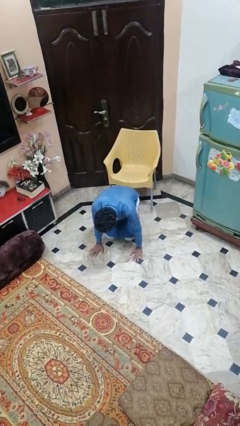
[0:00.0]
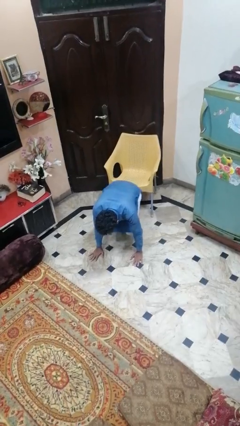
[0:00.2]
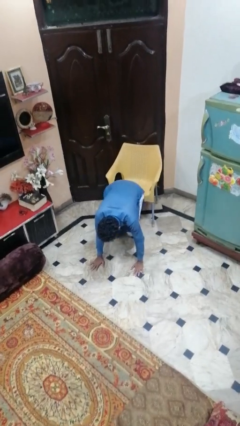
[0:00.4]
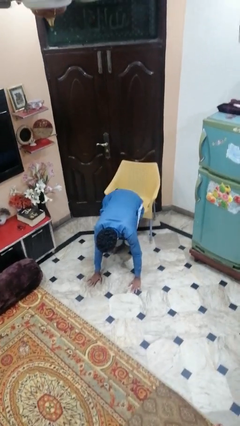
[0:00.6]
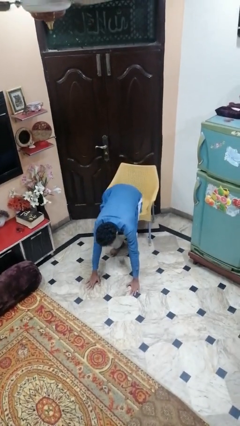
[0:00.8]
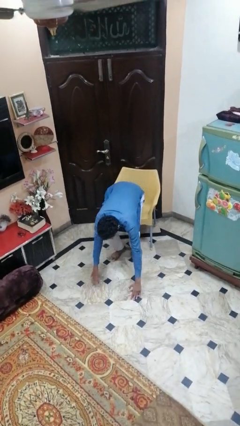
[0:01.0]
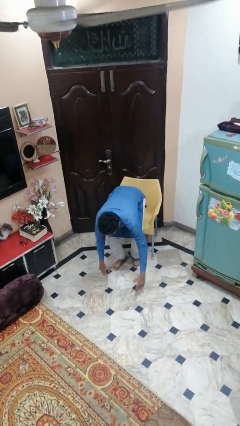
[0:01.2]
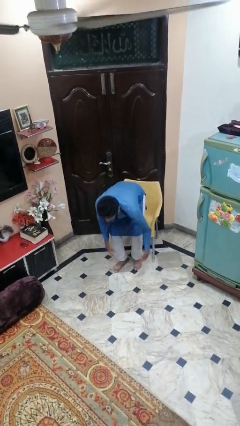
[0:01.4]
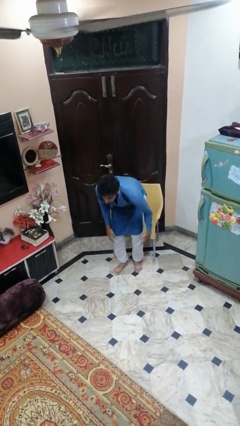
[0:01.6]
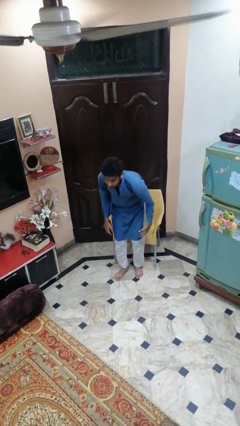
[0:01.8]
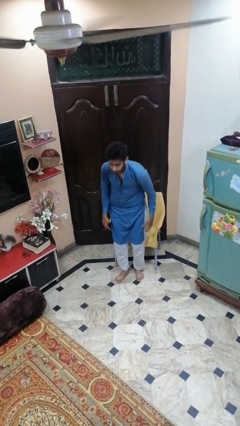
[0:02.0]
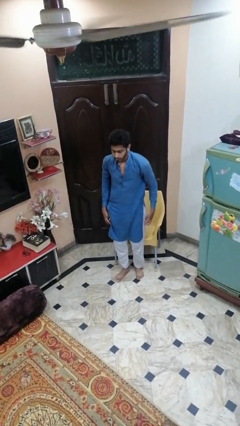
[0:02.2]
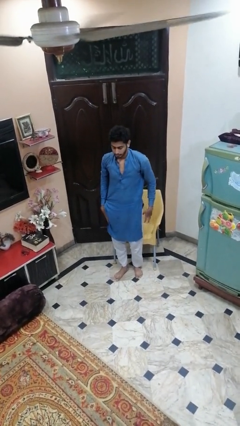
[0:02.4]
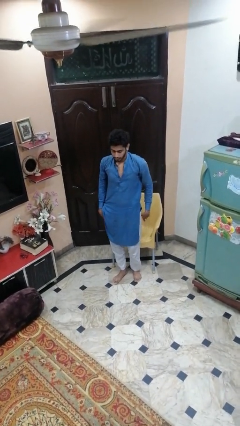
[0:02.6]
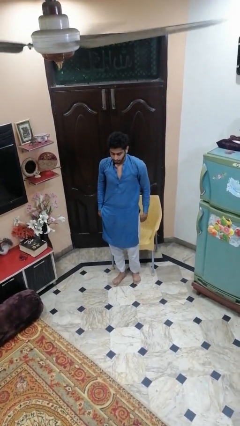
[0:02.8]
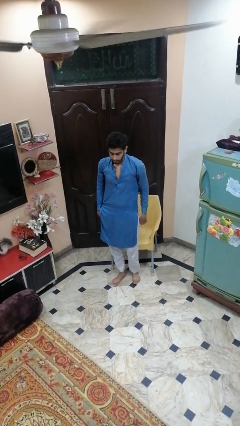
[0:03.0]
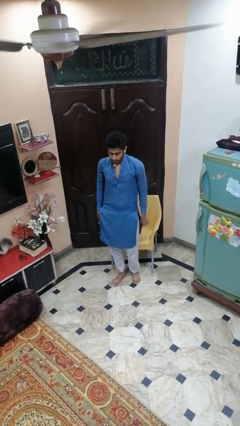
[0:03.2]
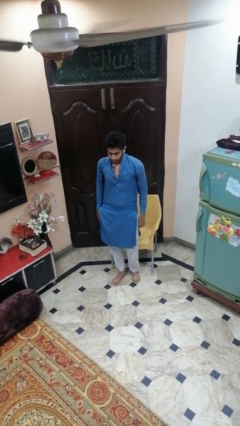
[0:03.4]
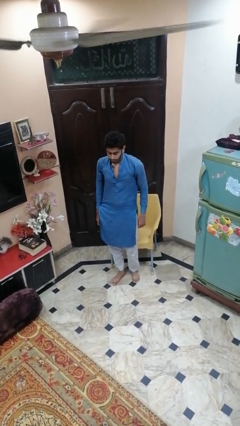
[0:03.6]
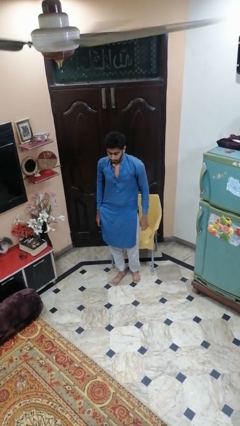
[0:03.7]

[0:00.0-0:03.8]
person stands up from floor

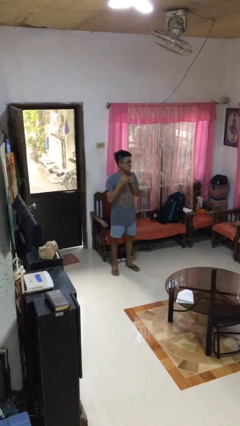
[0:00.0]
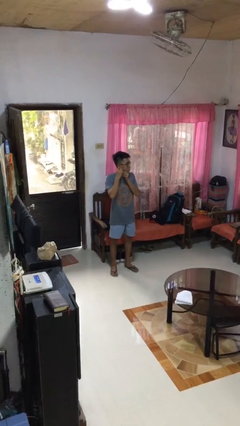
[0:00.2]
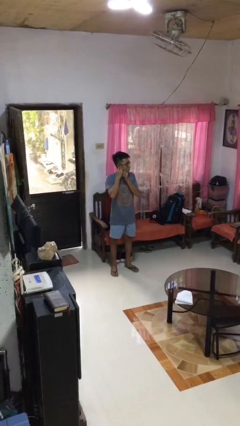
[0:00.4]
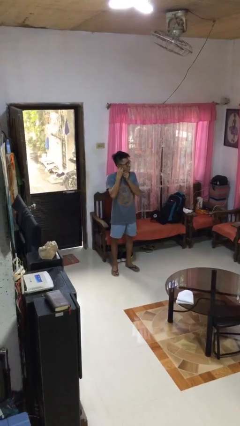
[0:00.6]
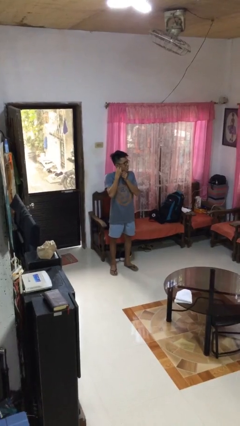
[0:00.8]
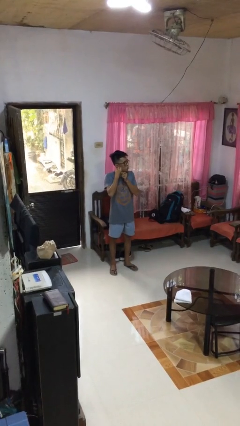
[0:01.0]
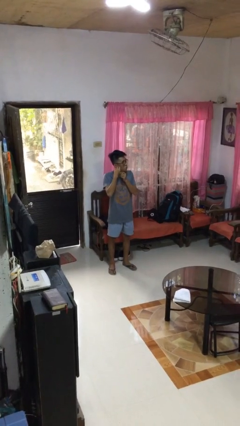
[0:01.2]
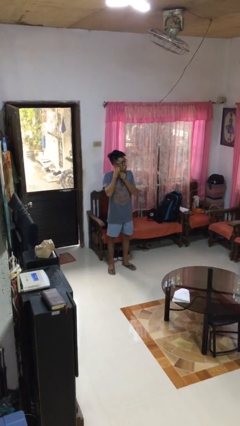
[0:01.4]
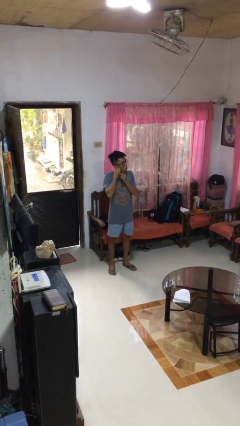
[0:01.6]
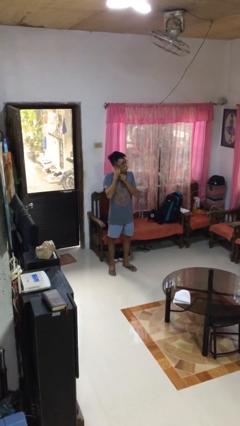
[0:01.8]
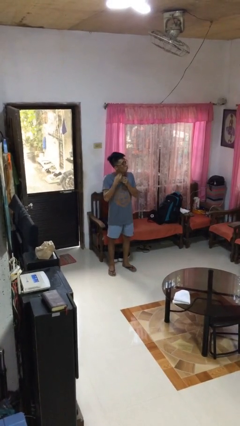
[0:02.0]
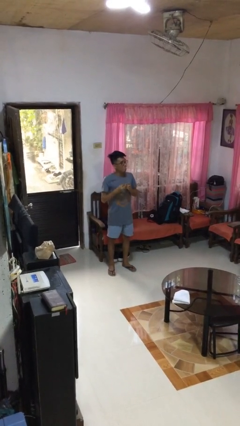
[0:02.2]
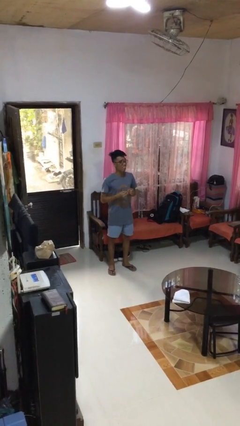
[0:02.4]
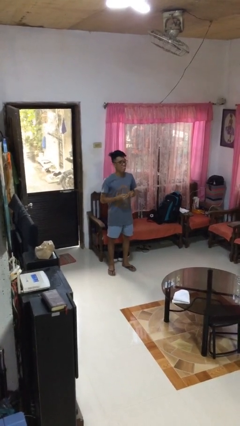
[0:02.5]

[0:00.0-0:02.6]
person takes off earrings

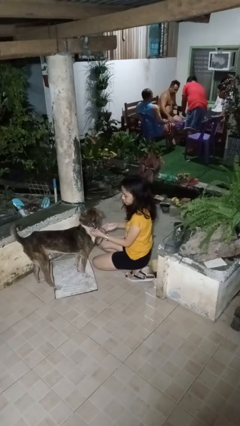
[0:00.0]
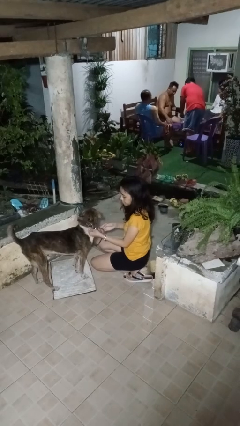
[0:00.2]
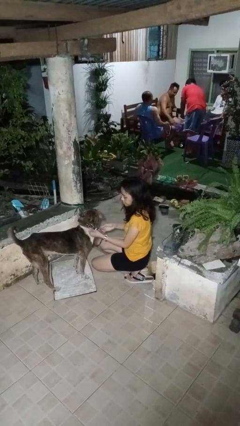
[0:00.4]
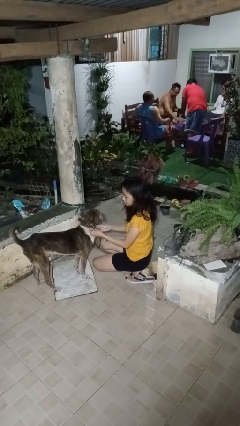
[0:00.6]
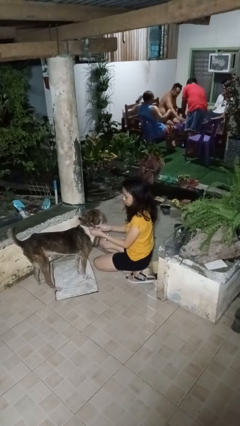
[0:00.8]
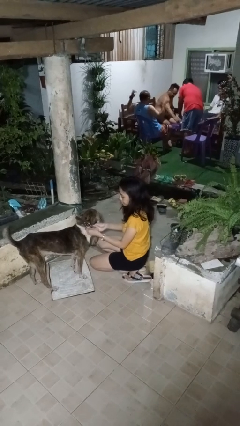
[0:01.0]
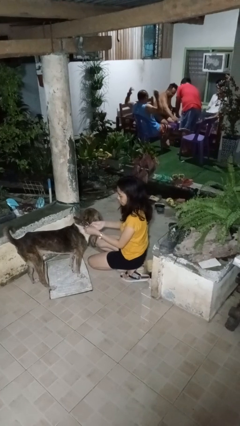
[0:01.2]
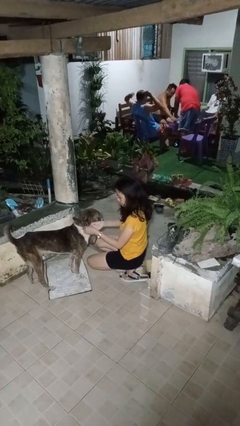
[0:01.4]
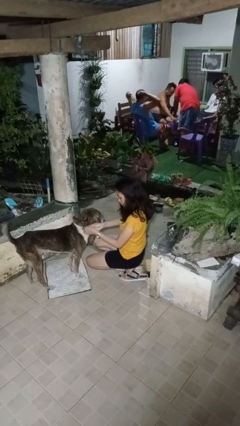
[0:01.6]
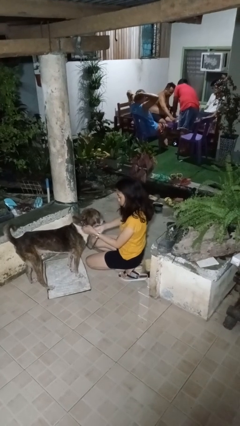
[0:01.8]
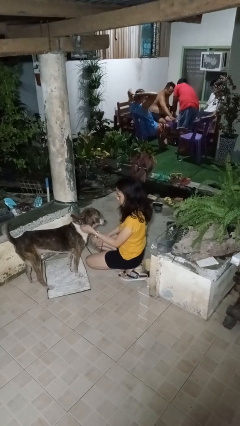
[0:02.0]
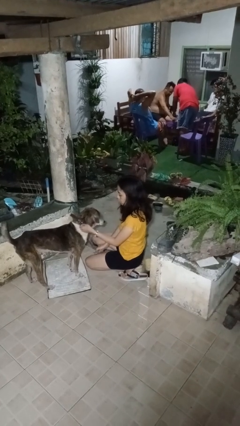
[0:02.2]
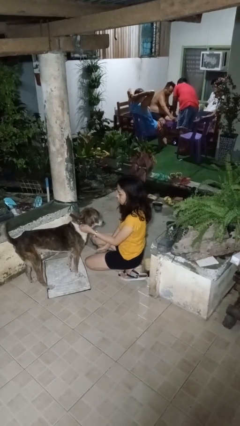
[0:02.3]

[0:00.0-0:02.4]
person unattaches leash from dog

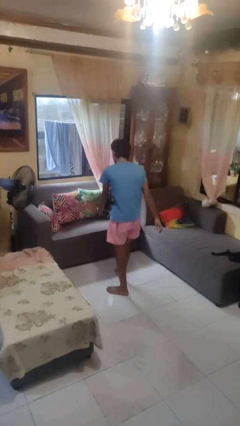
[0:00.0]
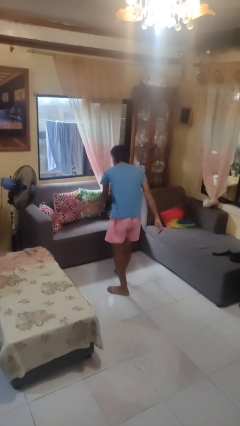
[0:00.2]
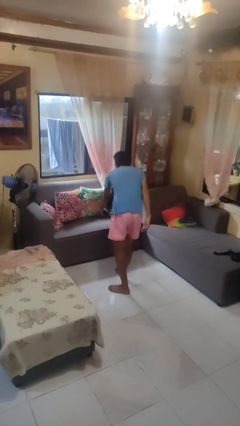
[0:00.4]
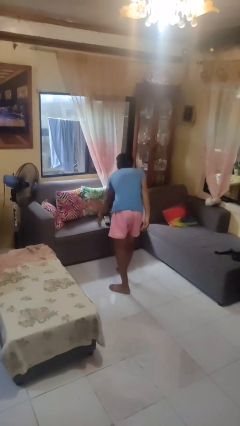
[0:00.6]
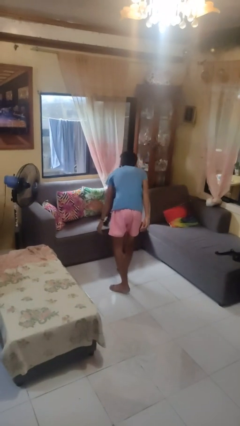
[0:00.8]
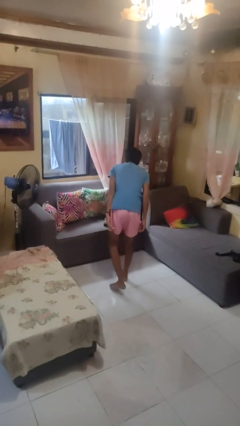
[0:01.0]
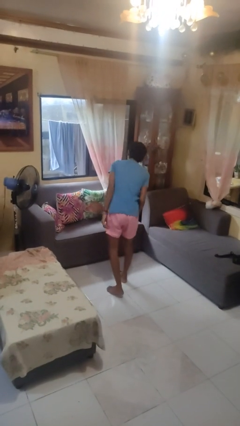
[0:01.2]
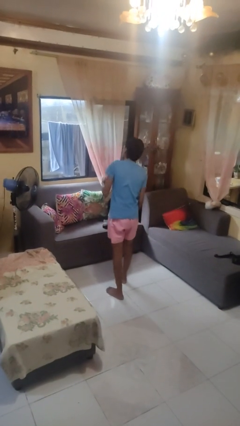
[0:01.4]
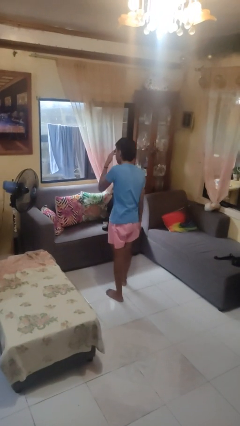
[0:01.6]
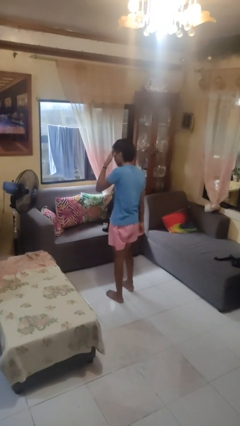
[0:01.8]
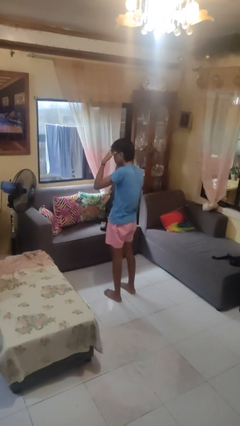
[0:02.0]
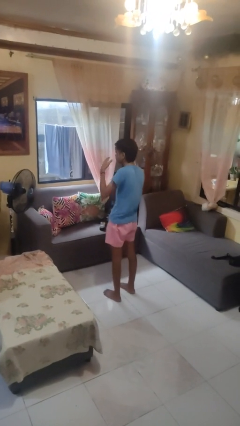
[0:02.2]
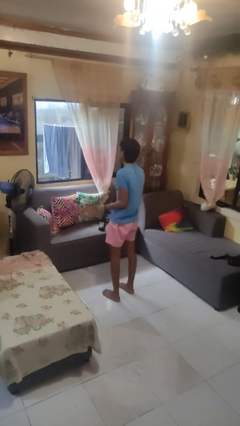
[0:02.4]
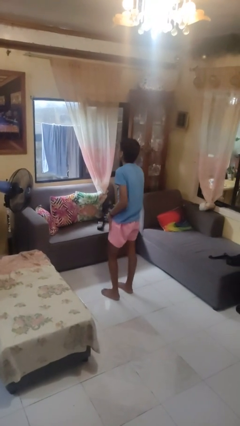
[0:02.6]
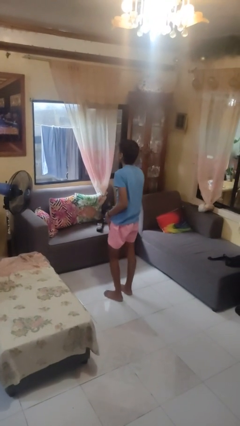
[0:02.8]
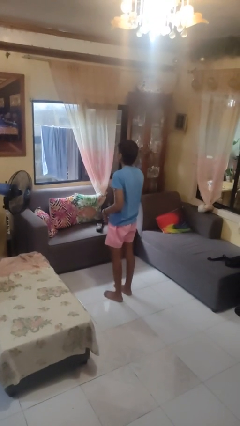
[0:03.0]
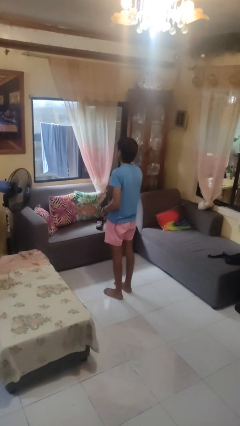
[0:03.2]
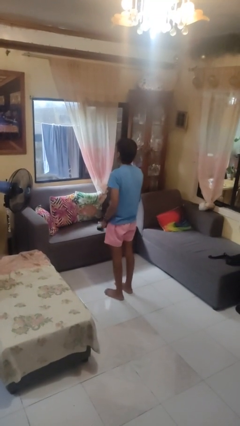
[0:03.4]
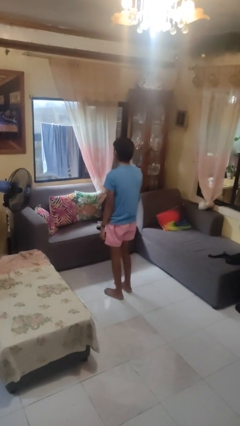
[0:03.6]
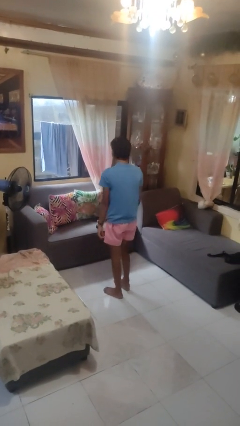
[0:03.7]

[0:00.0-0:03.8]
person puts down object on couch

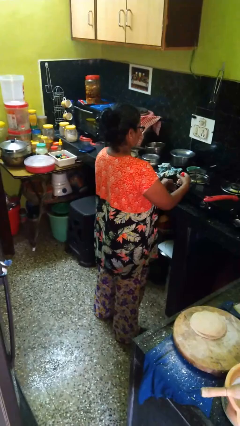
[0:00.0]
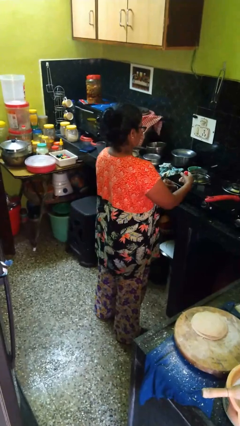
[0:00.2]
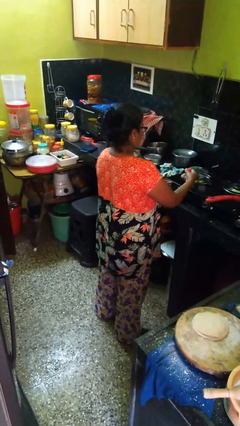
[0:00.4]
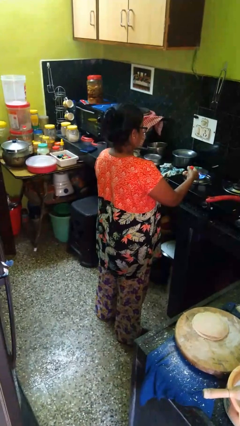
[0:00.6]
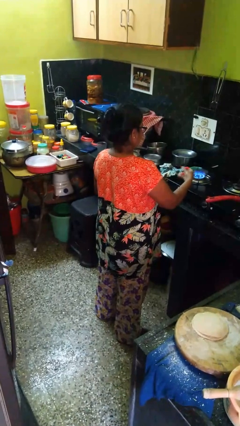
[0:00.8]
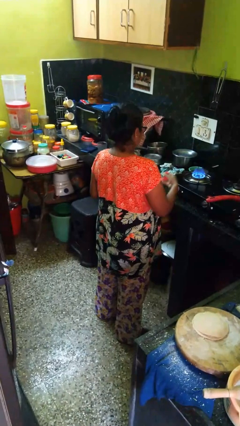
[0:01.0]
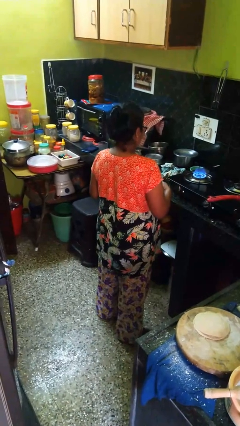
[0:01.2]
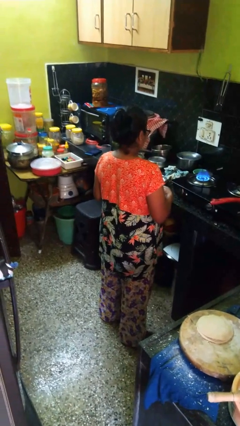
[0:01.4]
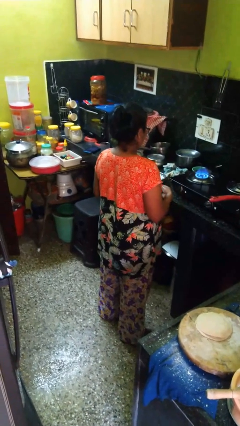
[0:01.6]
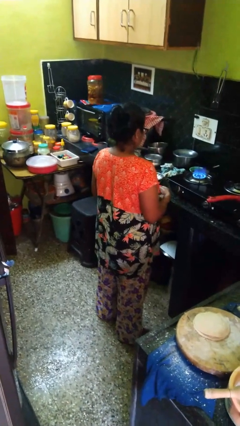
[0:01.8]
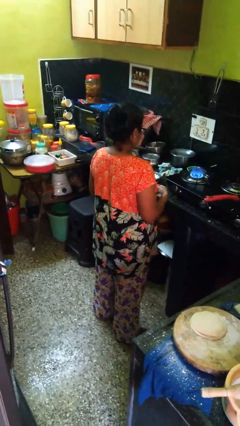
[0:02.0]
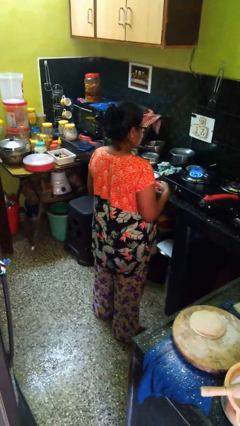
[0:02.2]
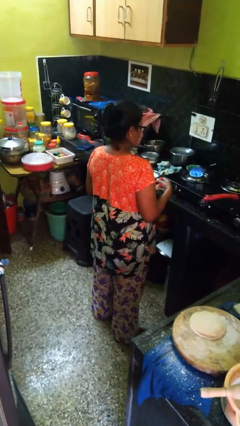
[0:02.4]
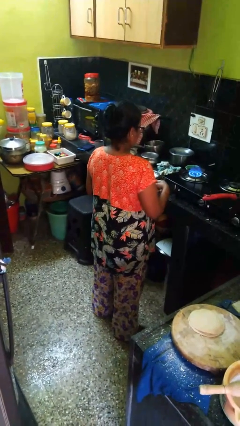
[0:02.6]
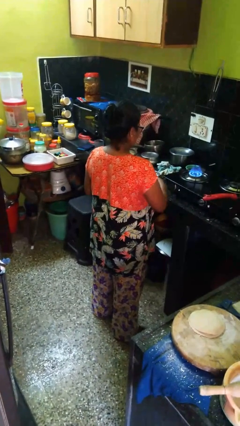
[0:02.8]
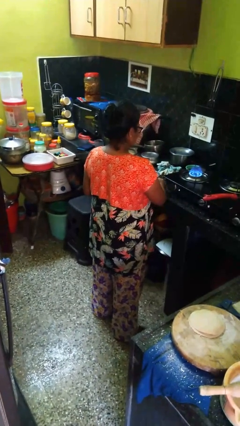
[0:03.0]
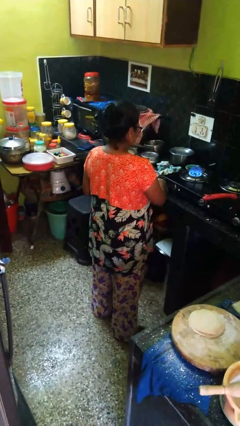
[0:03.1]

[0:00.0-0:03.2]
person turns on stovetop

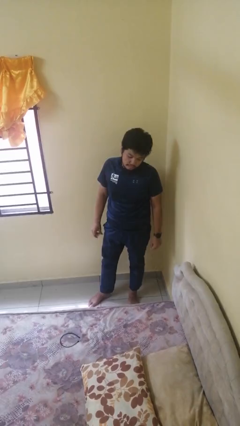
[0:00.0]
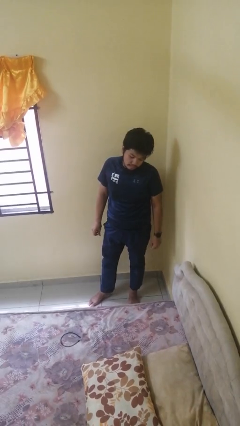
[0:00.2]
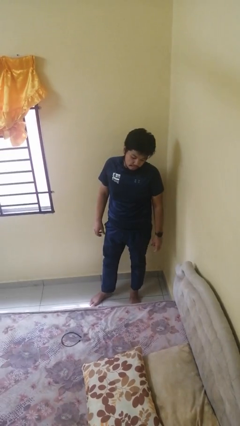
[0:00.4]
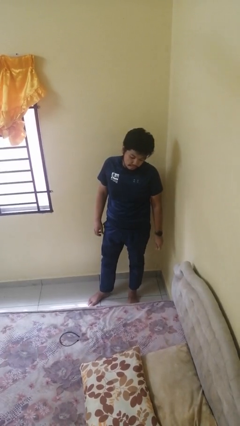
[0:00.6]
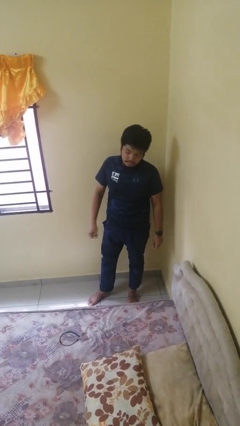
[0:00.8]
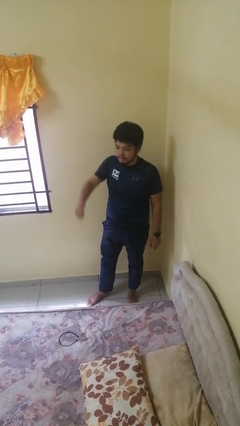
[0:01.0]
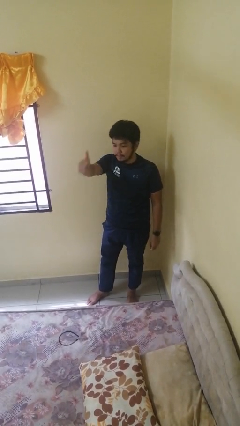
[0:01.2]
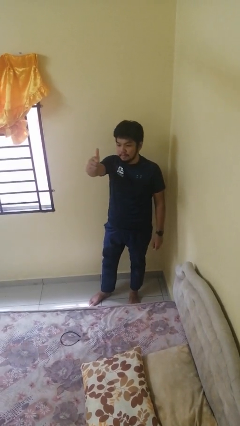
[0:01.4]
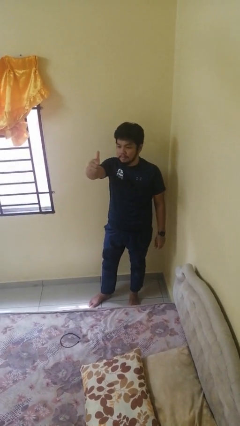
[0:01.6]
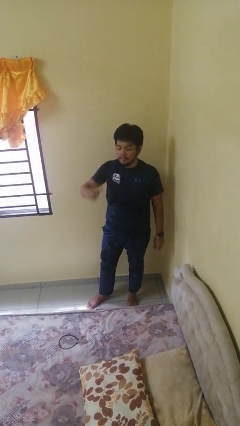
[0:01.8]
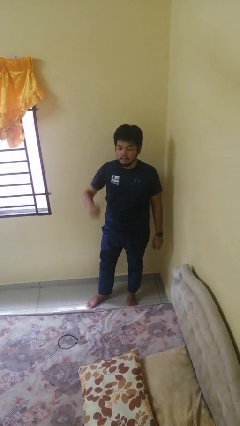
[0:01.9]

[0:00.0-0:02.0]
person gestures thumbs up
